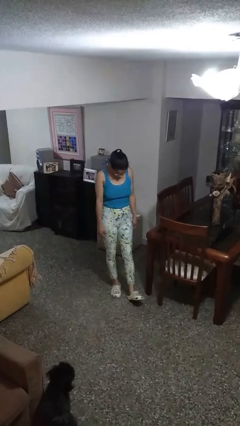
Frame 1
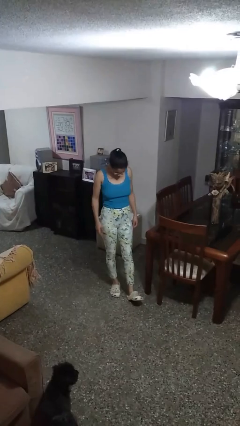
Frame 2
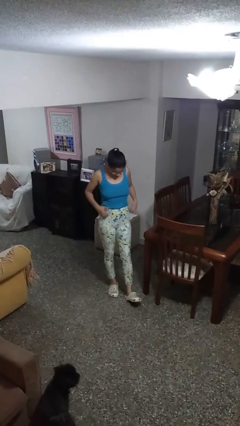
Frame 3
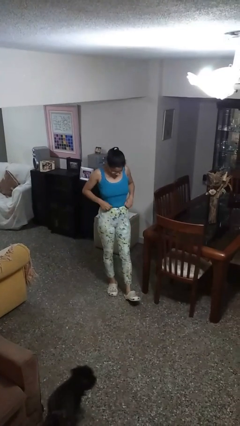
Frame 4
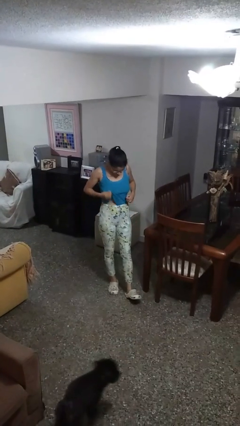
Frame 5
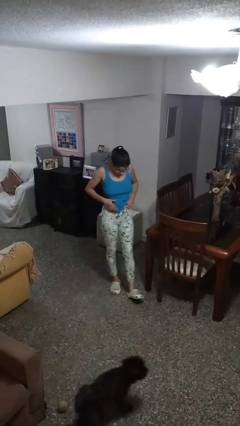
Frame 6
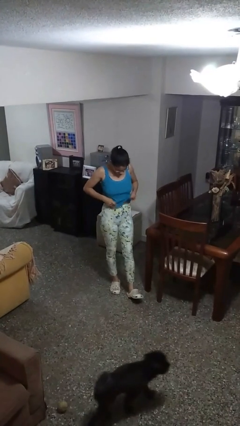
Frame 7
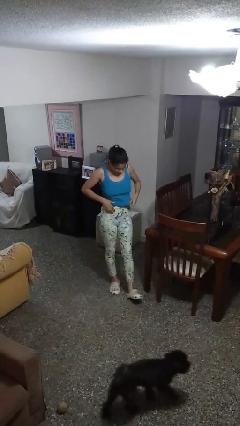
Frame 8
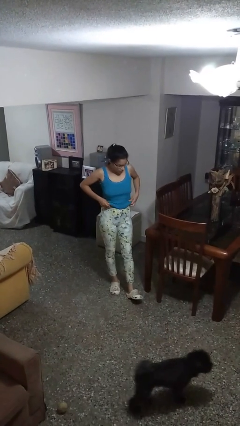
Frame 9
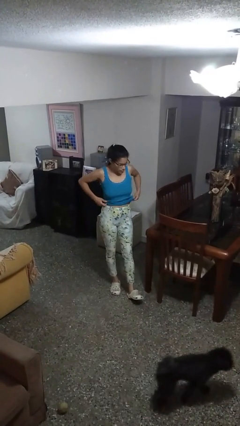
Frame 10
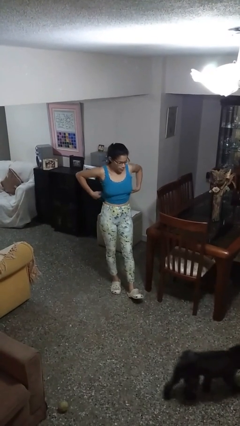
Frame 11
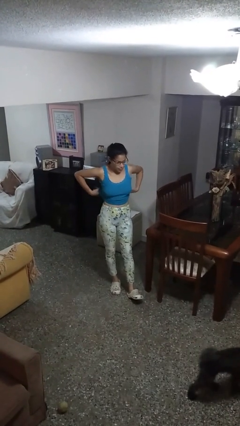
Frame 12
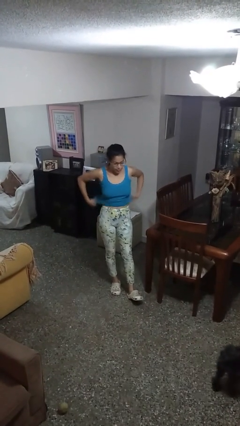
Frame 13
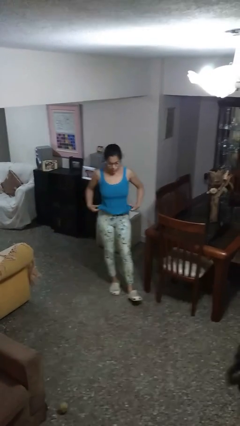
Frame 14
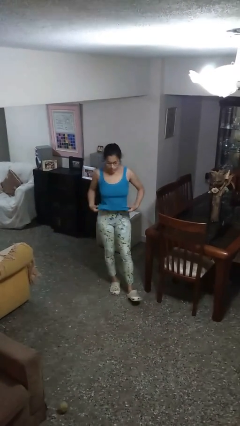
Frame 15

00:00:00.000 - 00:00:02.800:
person untucks shirt

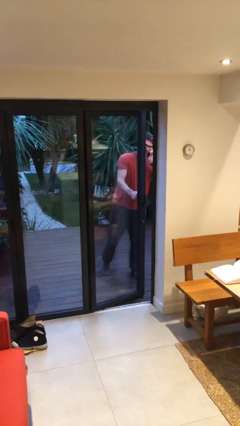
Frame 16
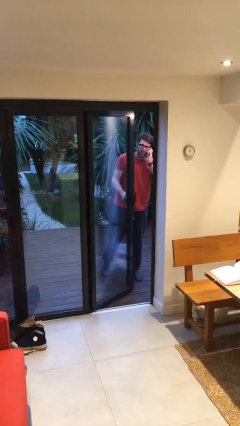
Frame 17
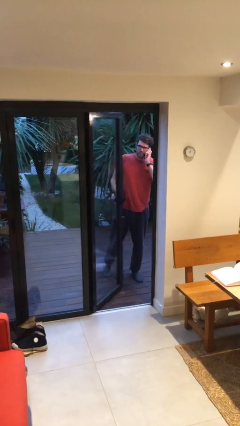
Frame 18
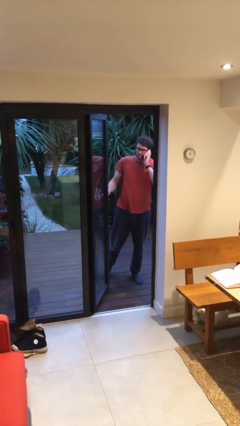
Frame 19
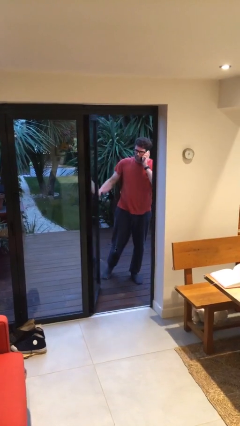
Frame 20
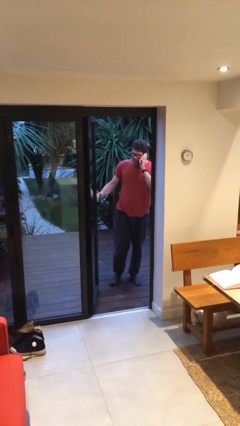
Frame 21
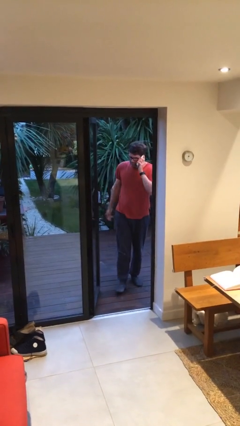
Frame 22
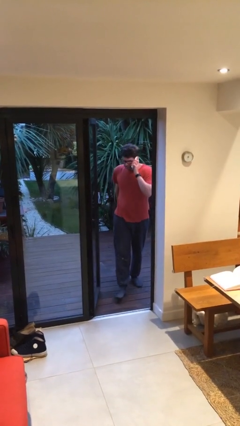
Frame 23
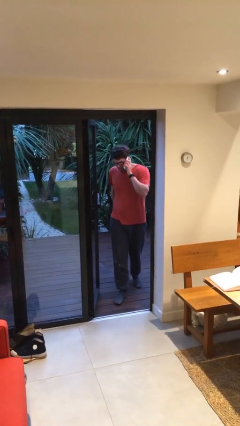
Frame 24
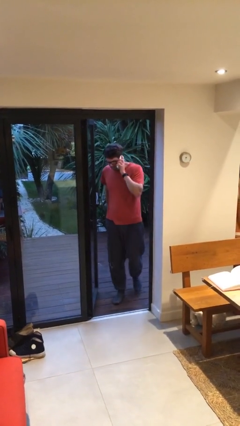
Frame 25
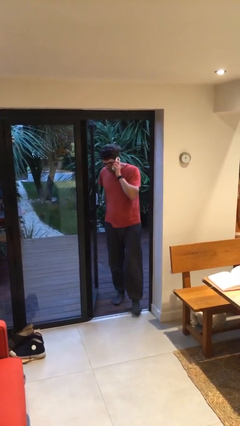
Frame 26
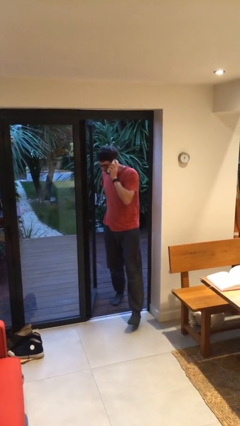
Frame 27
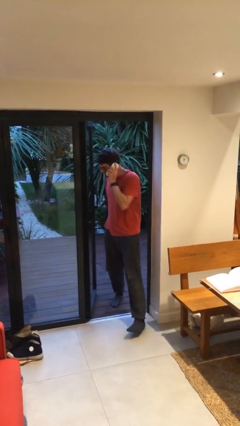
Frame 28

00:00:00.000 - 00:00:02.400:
person opens facility door

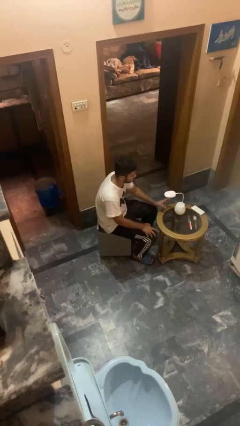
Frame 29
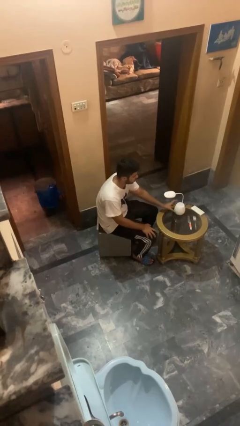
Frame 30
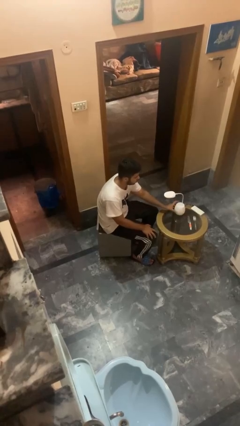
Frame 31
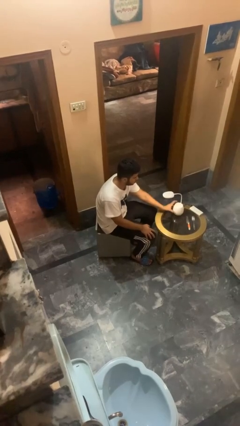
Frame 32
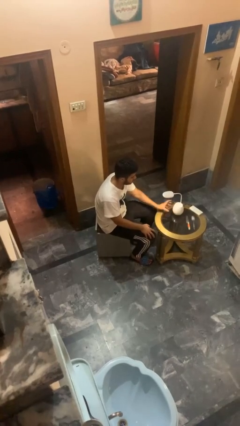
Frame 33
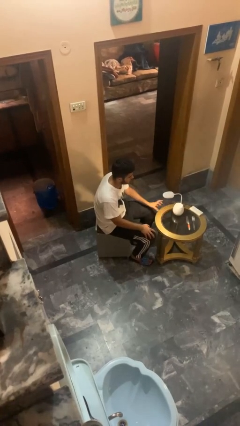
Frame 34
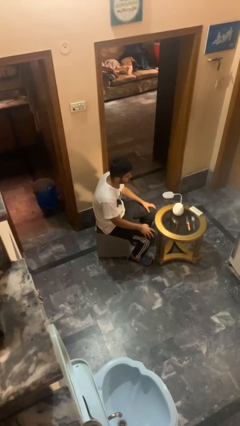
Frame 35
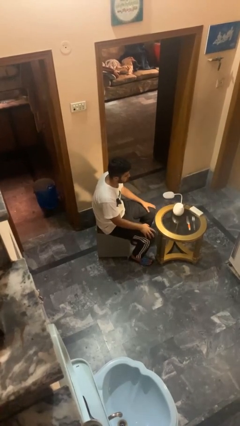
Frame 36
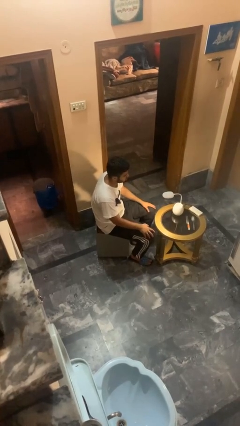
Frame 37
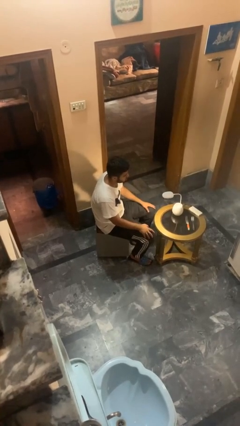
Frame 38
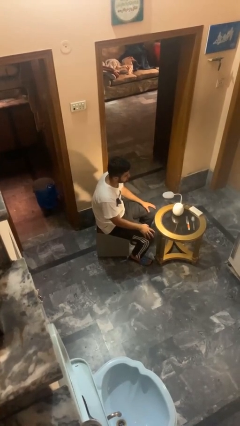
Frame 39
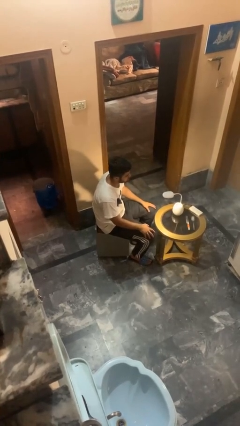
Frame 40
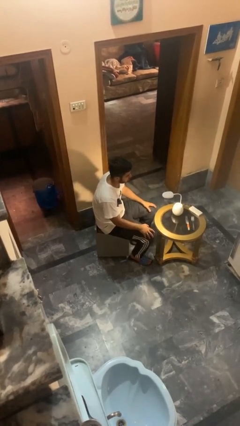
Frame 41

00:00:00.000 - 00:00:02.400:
person turns on lamp

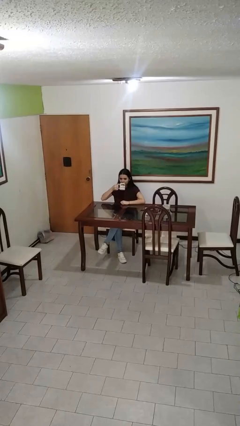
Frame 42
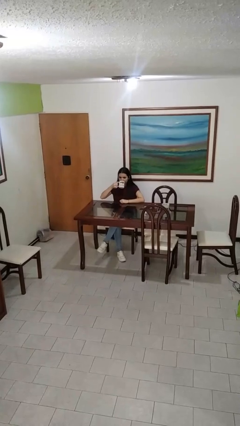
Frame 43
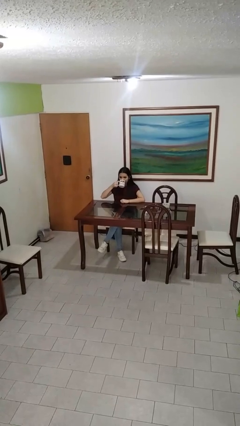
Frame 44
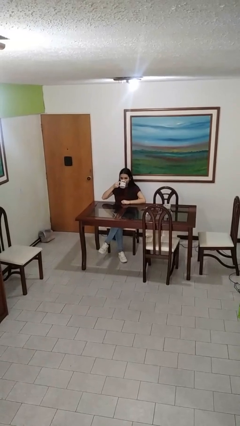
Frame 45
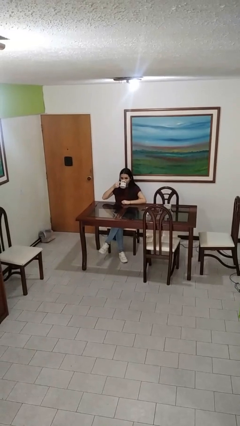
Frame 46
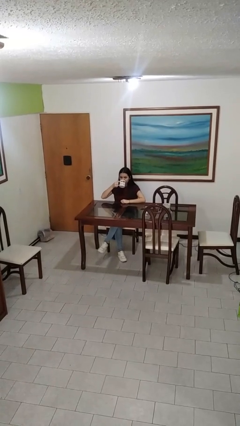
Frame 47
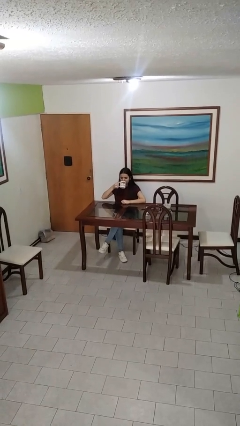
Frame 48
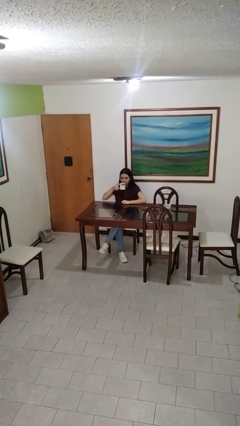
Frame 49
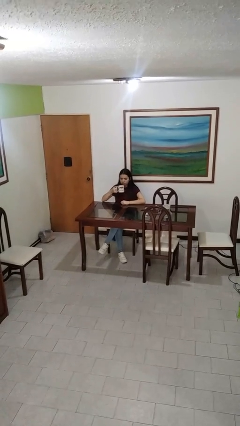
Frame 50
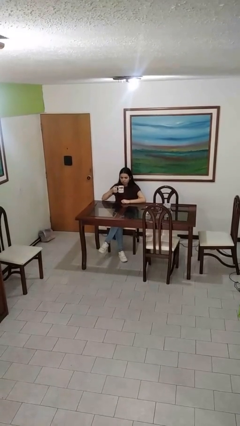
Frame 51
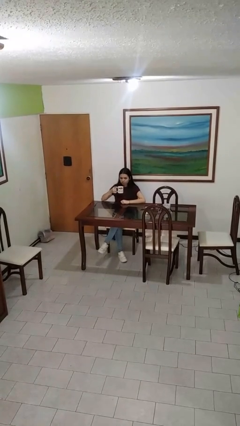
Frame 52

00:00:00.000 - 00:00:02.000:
person drinks from mug

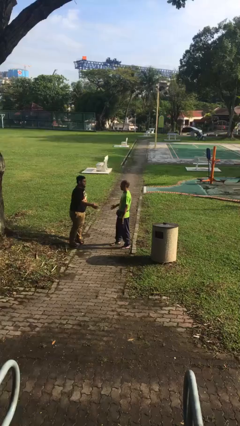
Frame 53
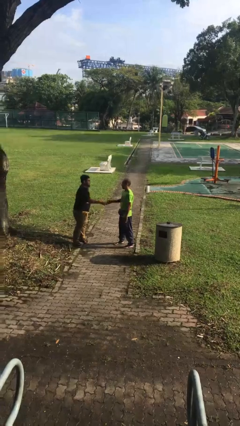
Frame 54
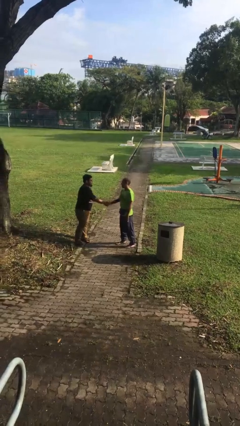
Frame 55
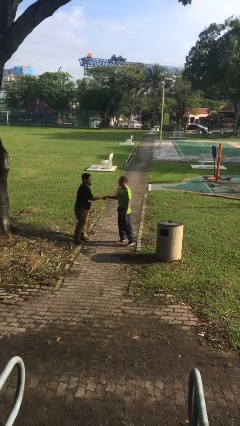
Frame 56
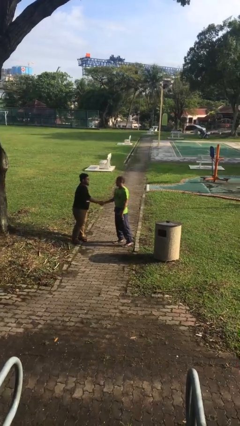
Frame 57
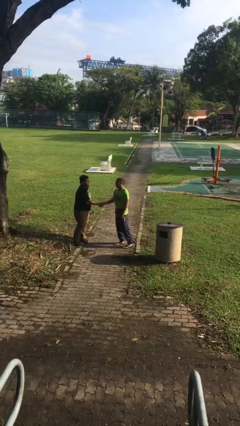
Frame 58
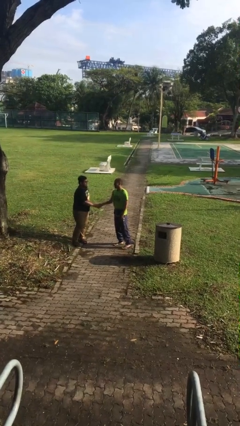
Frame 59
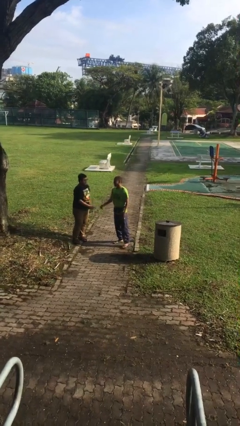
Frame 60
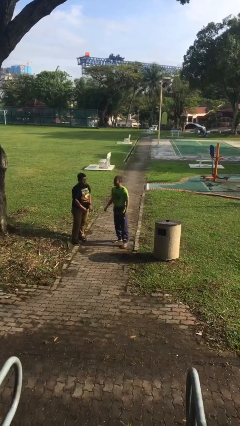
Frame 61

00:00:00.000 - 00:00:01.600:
person shakes hand

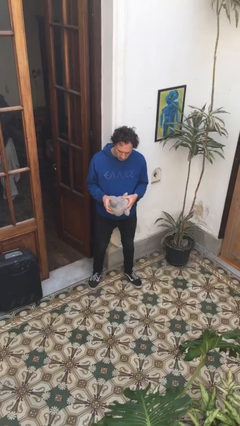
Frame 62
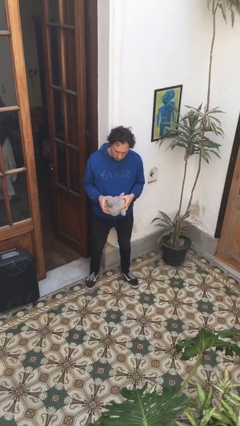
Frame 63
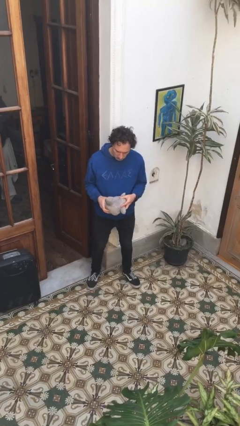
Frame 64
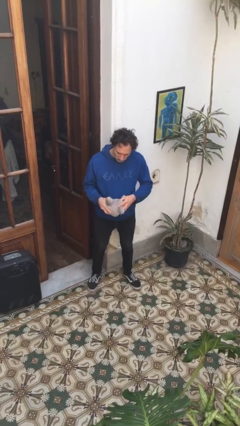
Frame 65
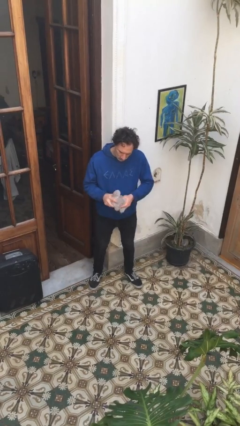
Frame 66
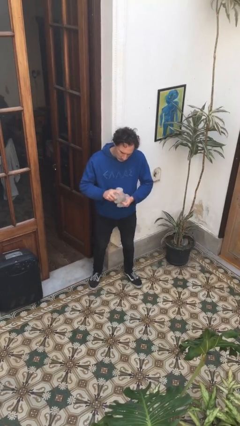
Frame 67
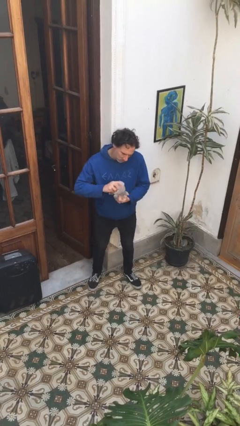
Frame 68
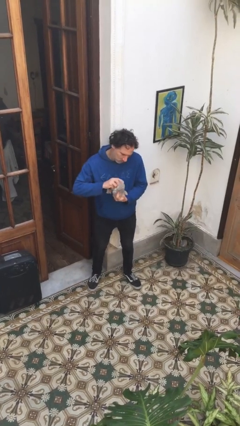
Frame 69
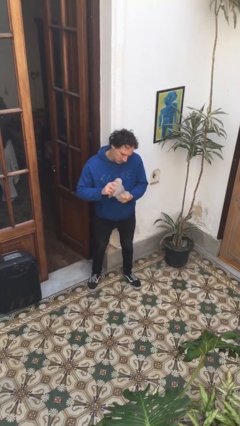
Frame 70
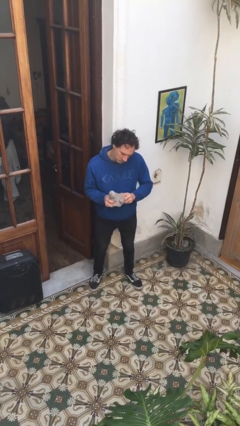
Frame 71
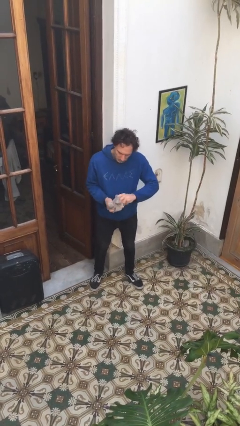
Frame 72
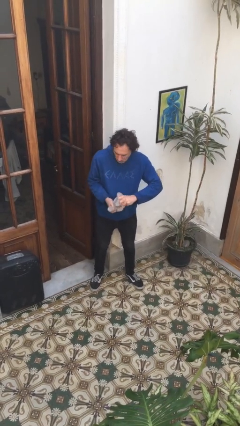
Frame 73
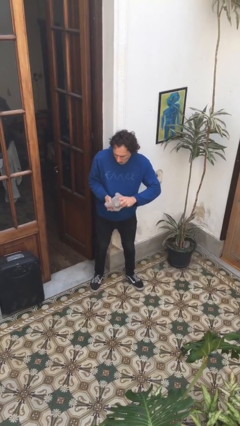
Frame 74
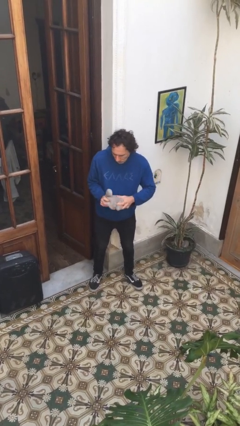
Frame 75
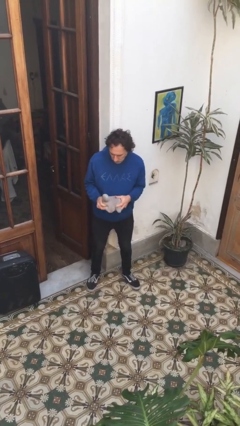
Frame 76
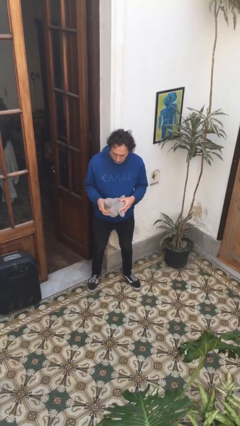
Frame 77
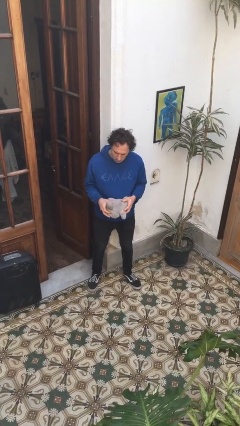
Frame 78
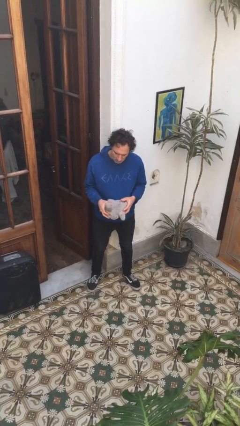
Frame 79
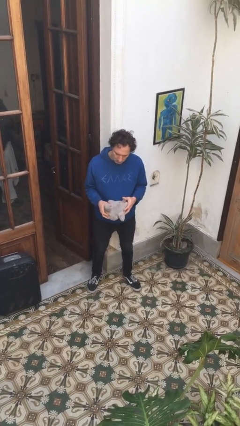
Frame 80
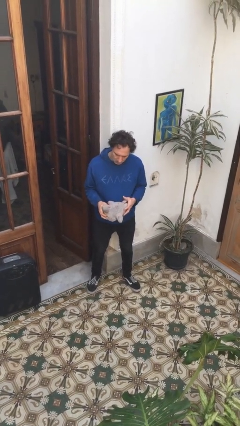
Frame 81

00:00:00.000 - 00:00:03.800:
person squeezes object

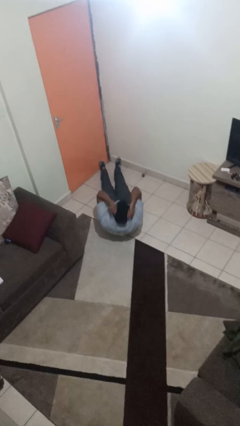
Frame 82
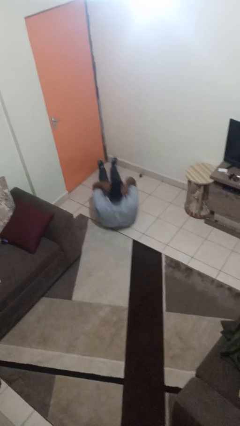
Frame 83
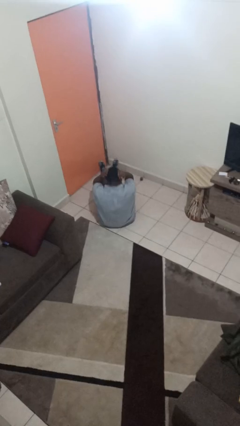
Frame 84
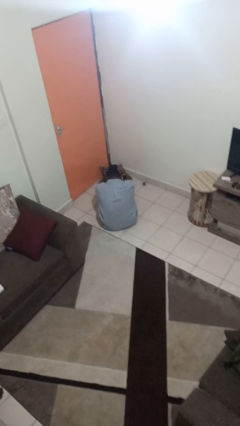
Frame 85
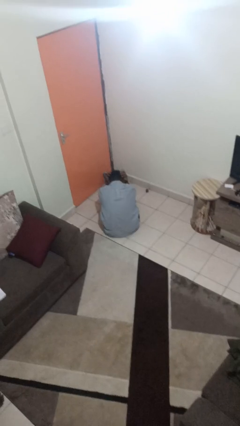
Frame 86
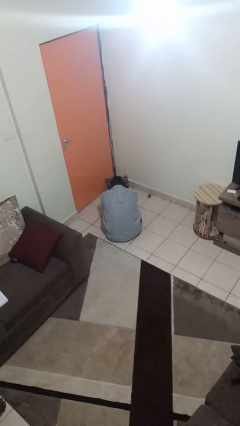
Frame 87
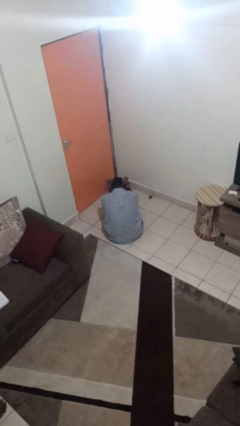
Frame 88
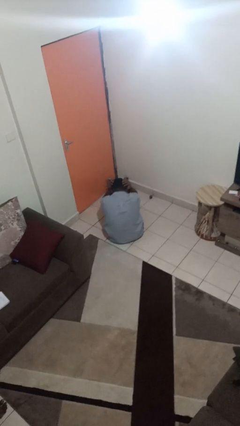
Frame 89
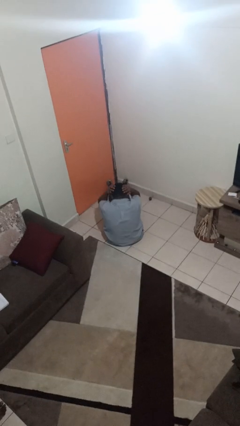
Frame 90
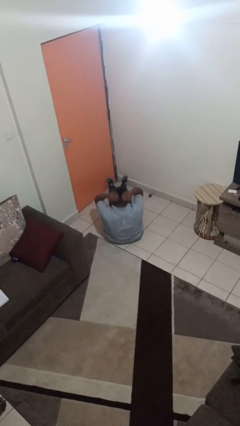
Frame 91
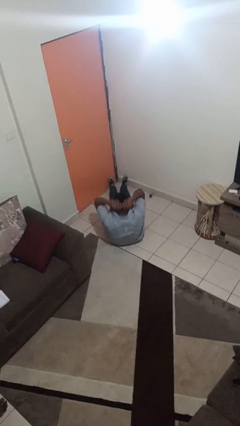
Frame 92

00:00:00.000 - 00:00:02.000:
person exercises with pushup
